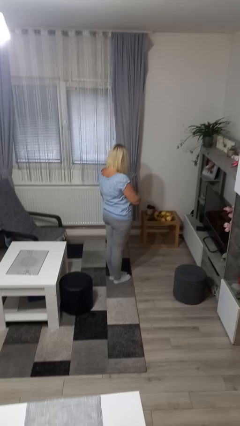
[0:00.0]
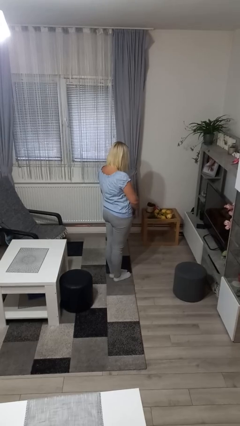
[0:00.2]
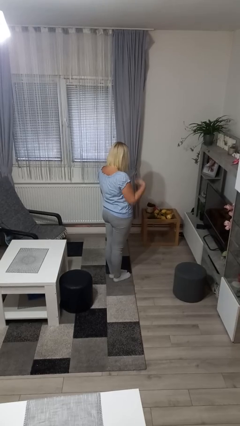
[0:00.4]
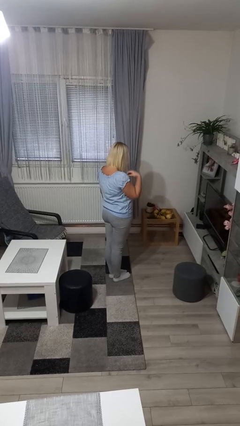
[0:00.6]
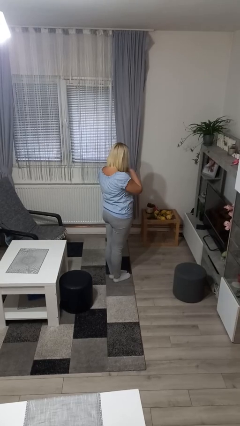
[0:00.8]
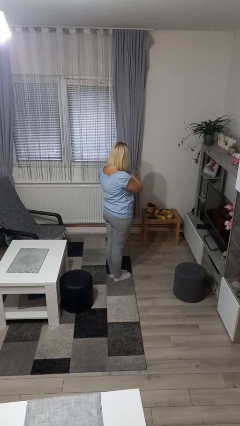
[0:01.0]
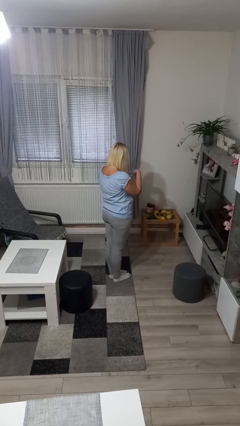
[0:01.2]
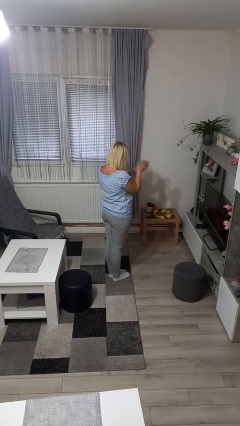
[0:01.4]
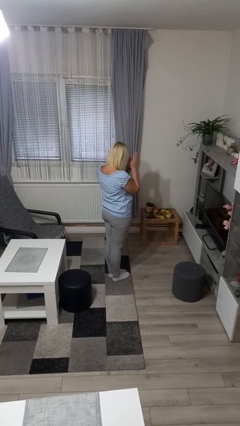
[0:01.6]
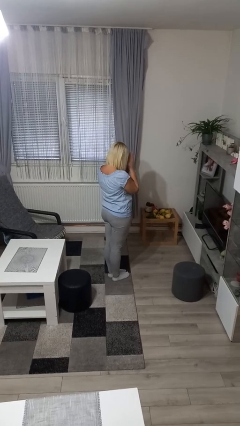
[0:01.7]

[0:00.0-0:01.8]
person prays

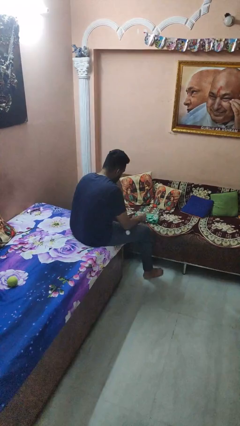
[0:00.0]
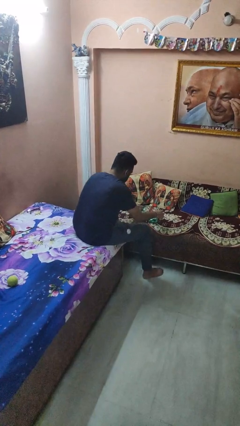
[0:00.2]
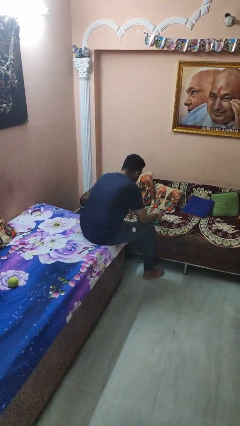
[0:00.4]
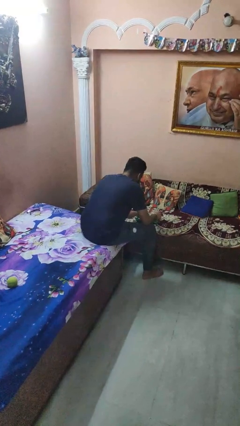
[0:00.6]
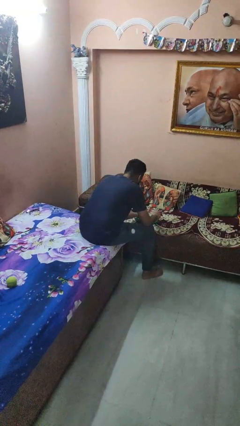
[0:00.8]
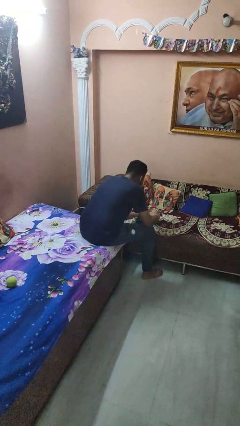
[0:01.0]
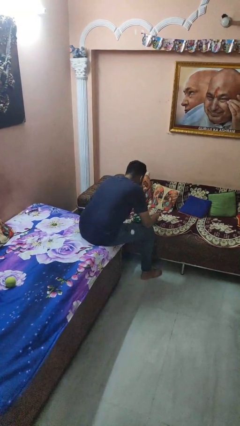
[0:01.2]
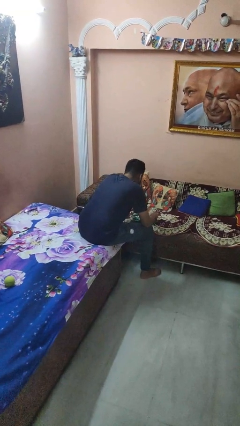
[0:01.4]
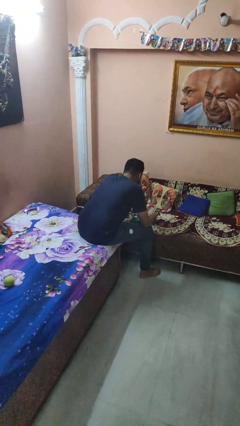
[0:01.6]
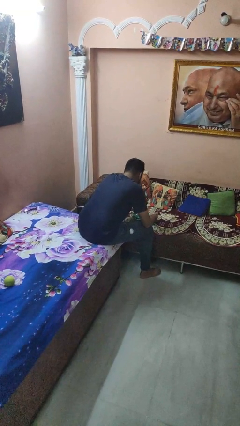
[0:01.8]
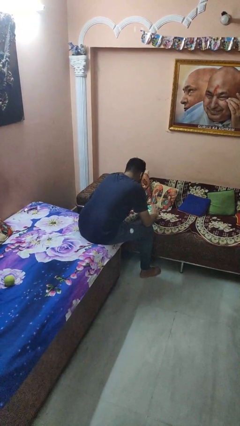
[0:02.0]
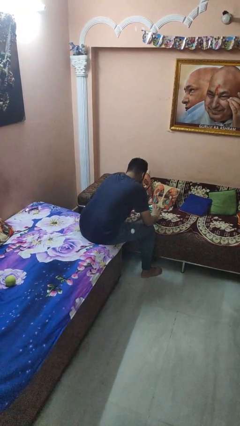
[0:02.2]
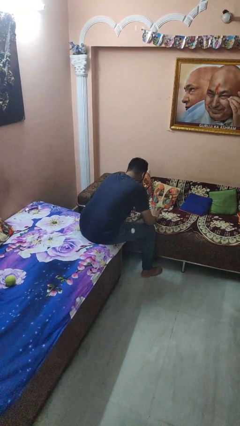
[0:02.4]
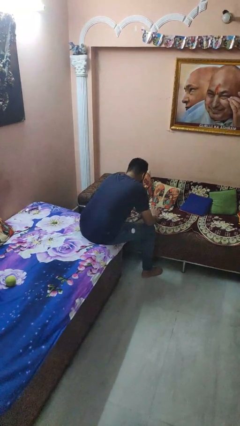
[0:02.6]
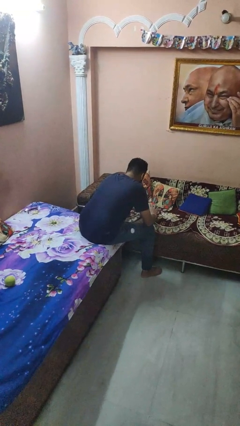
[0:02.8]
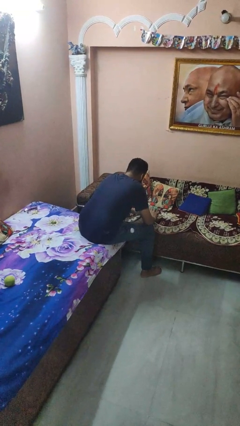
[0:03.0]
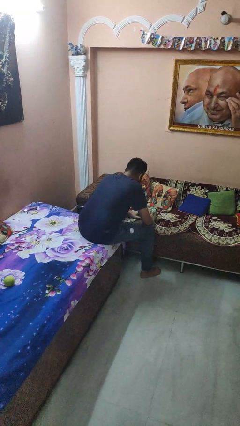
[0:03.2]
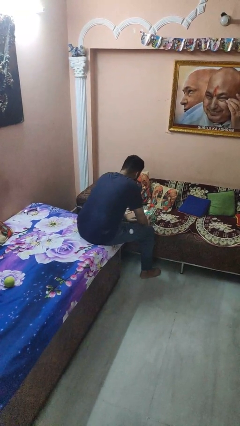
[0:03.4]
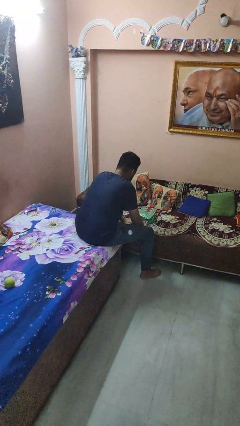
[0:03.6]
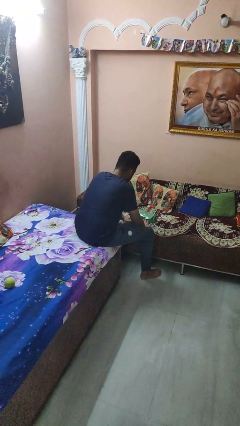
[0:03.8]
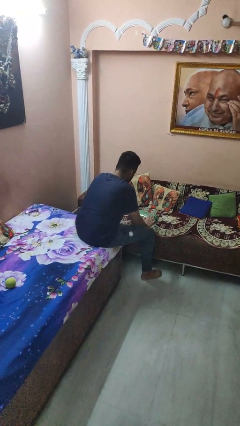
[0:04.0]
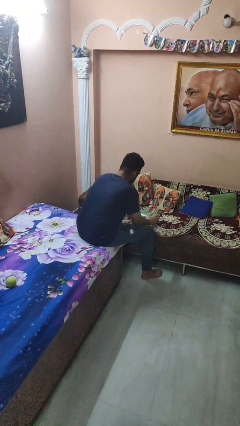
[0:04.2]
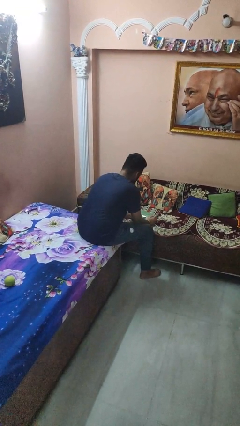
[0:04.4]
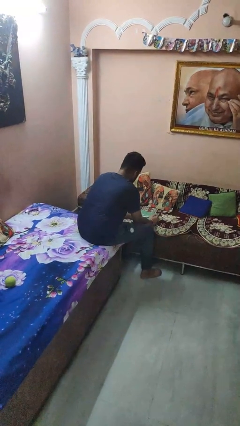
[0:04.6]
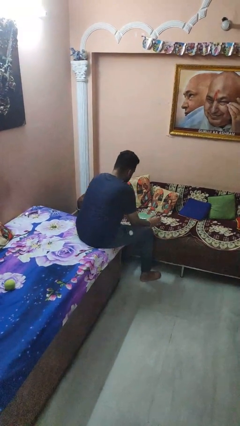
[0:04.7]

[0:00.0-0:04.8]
person wraps box

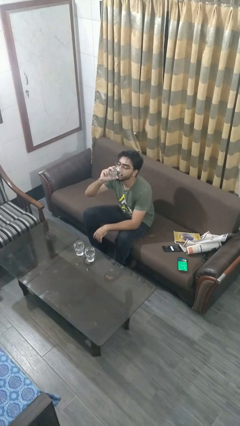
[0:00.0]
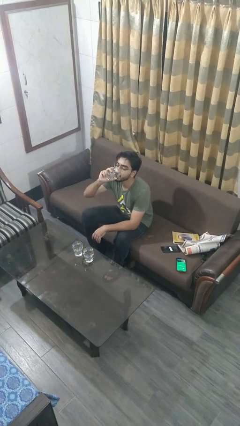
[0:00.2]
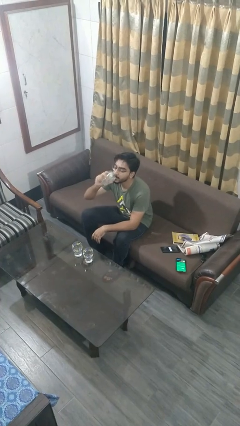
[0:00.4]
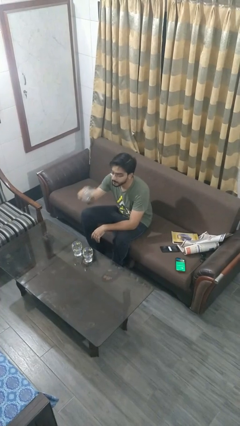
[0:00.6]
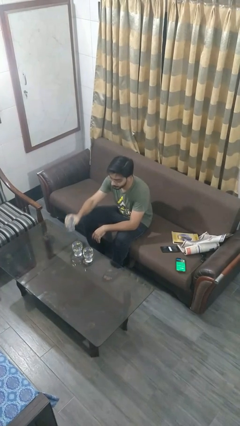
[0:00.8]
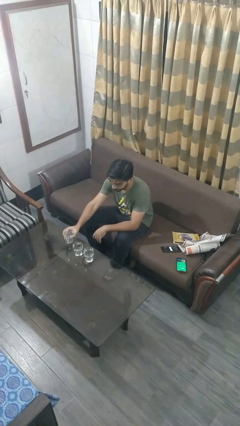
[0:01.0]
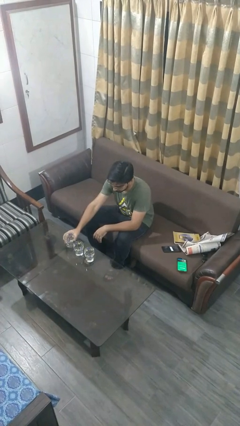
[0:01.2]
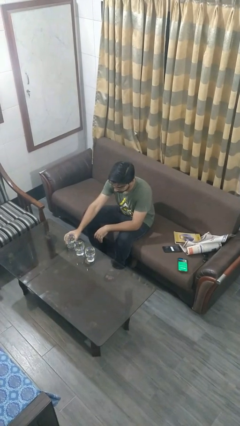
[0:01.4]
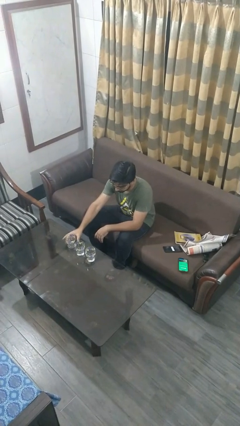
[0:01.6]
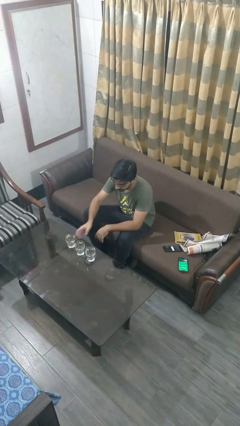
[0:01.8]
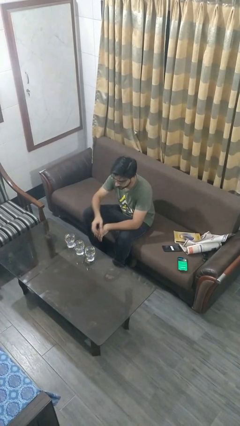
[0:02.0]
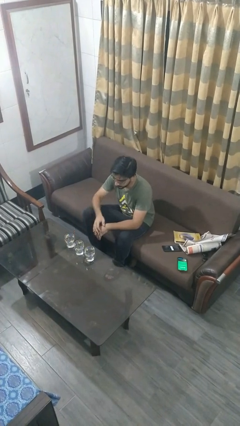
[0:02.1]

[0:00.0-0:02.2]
person puts down object on table

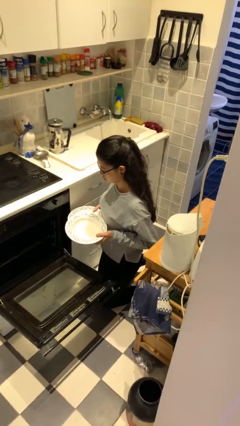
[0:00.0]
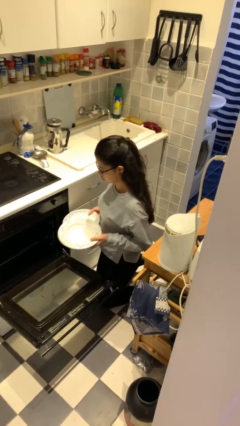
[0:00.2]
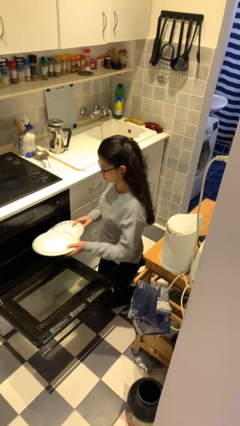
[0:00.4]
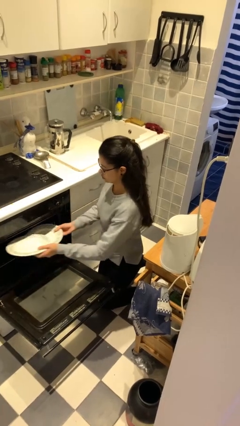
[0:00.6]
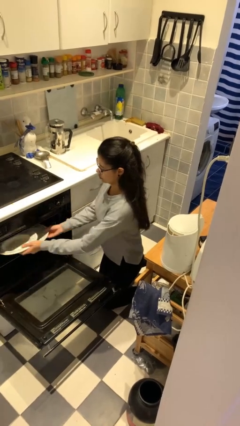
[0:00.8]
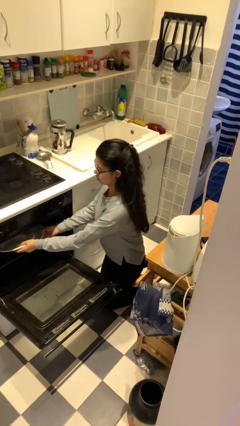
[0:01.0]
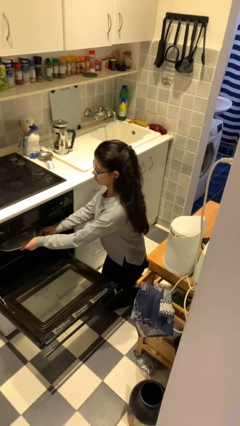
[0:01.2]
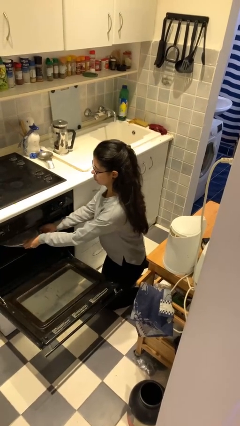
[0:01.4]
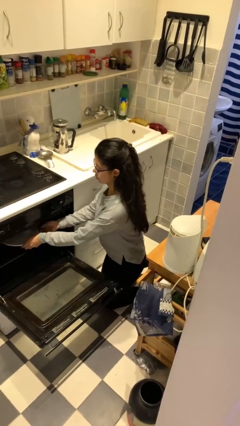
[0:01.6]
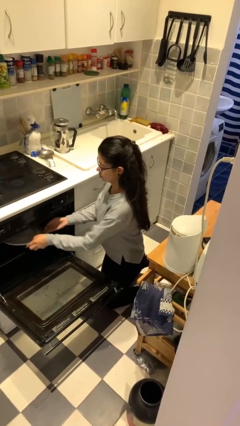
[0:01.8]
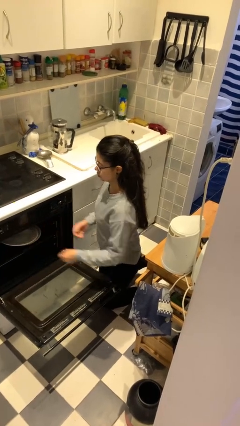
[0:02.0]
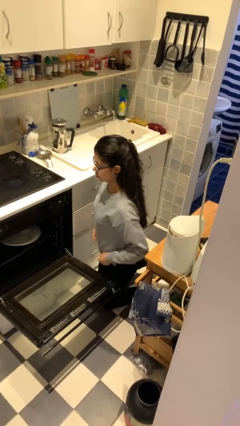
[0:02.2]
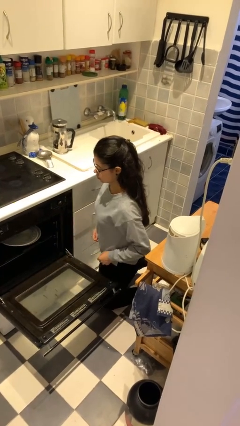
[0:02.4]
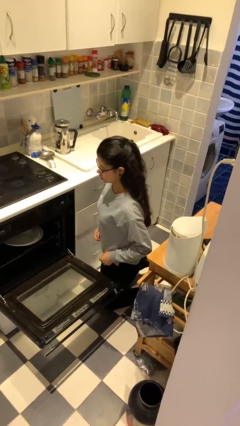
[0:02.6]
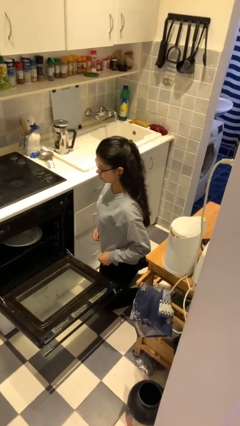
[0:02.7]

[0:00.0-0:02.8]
person loads dishwasher

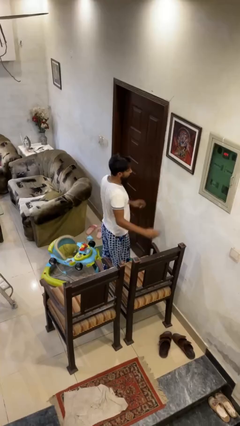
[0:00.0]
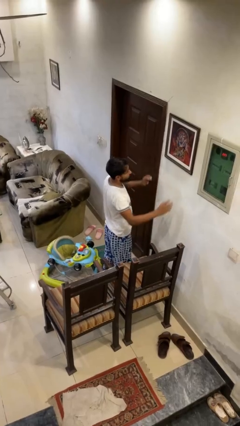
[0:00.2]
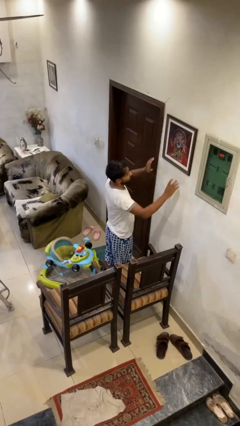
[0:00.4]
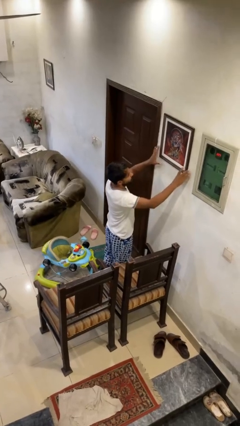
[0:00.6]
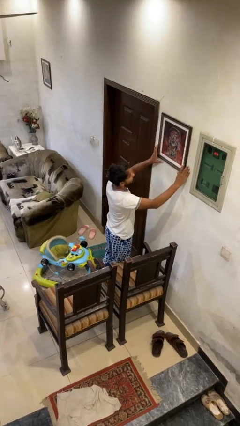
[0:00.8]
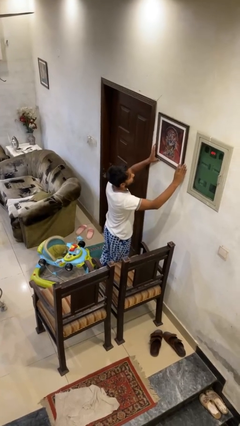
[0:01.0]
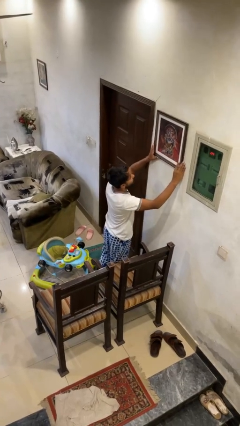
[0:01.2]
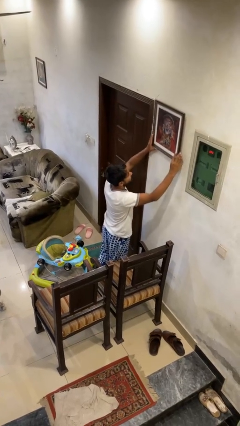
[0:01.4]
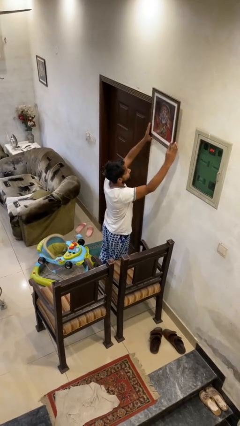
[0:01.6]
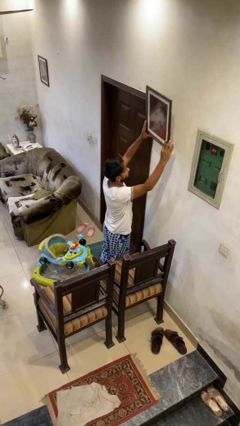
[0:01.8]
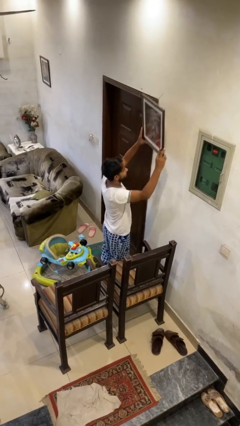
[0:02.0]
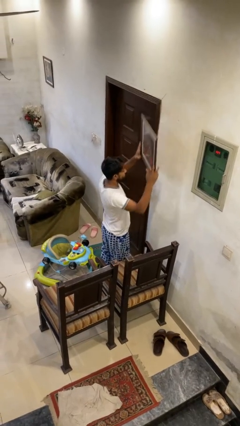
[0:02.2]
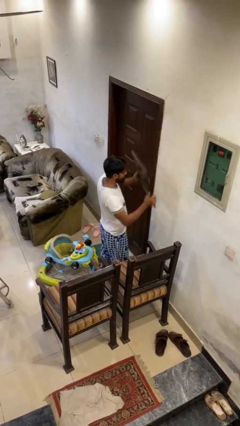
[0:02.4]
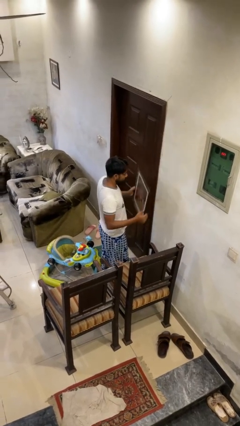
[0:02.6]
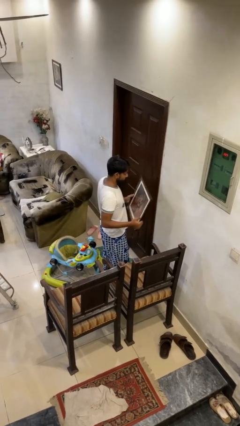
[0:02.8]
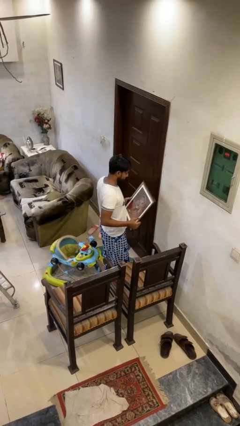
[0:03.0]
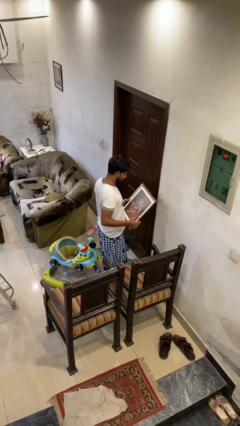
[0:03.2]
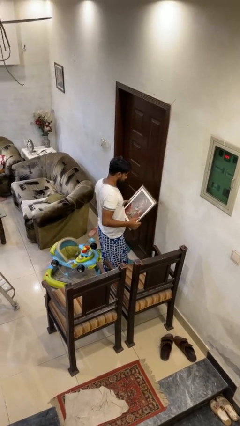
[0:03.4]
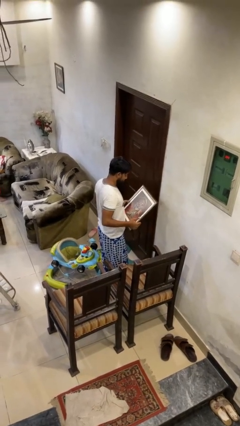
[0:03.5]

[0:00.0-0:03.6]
person takes down picture frame

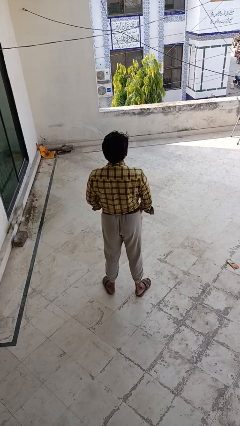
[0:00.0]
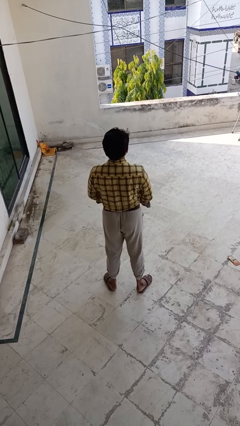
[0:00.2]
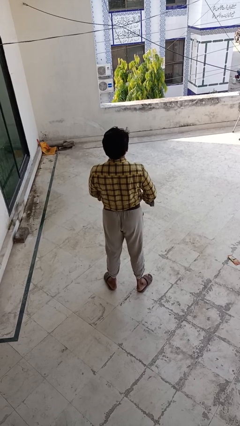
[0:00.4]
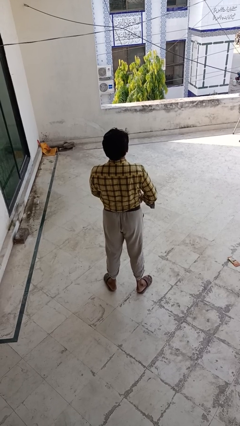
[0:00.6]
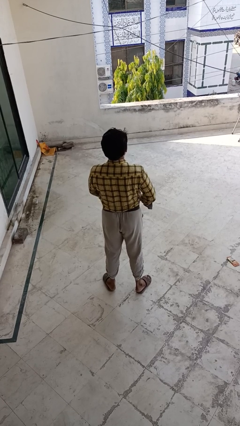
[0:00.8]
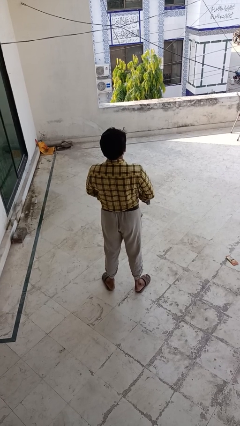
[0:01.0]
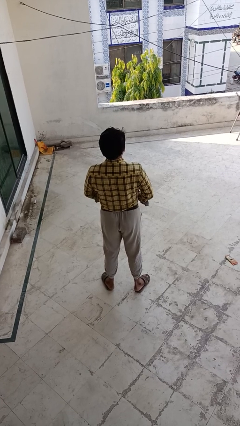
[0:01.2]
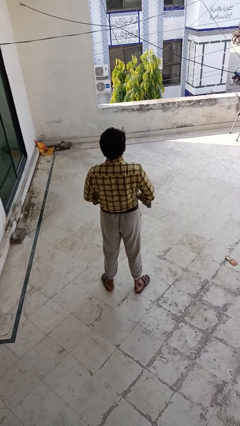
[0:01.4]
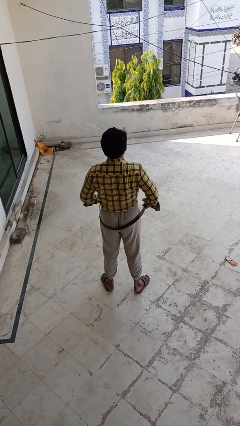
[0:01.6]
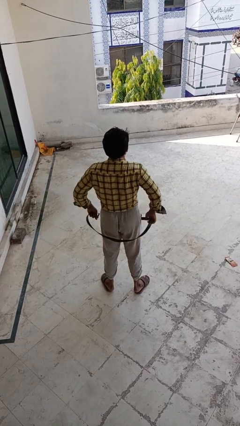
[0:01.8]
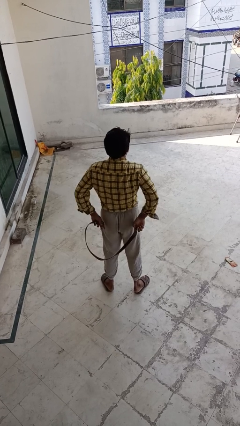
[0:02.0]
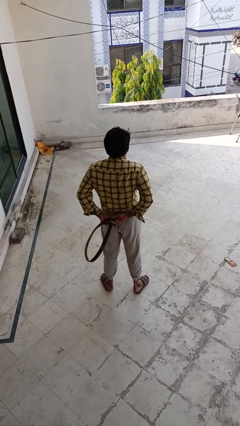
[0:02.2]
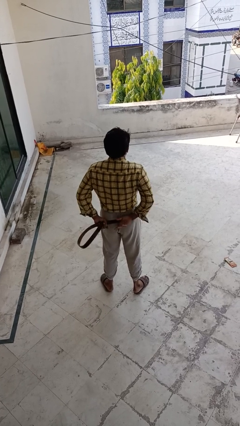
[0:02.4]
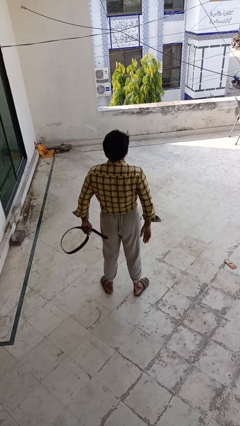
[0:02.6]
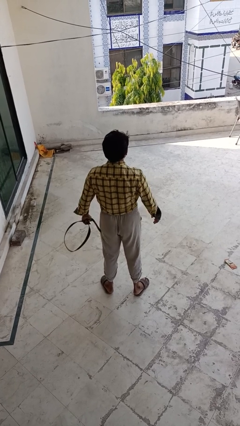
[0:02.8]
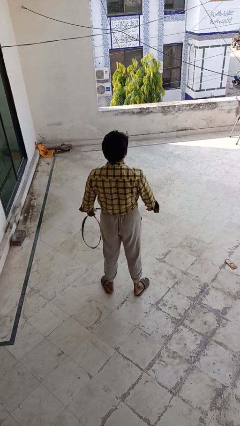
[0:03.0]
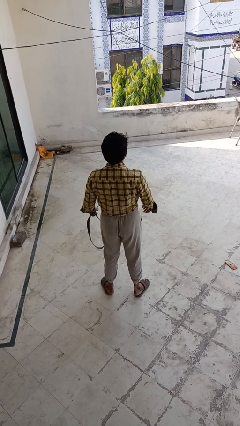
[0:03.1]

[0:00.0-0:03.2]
person takes off belt
